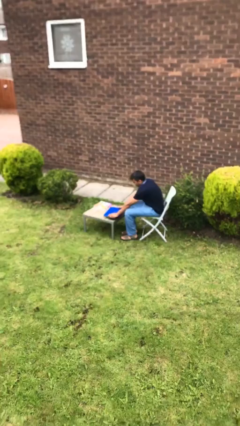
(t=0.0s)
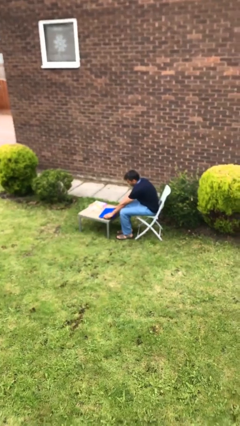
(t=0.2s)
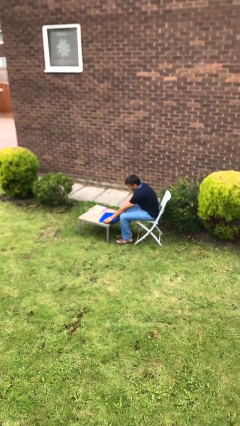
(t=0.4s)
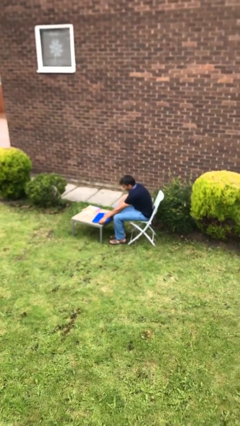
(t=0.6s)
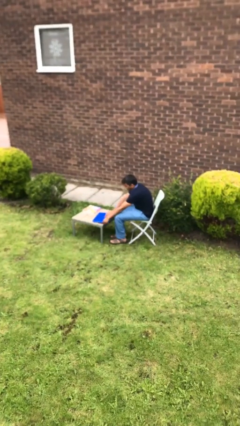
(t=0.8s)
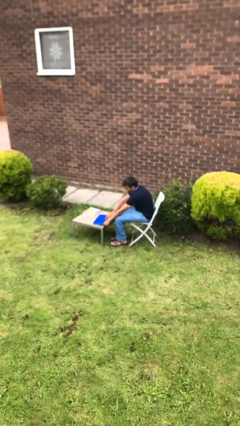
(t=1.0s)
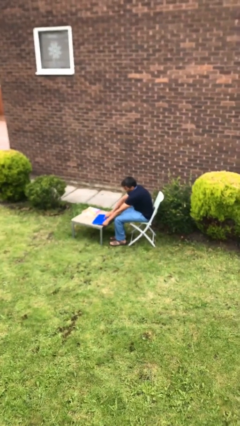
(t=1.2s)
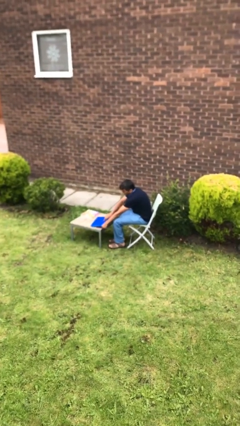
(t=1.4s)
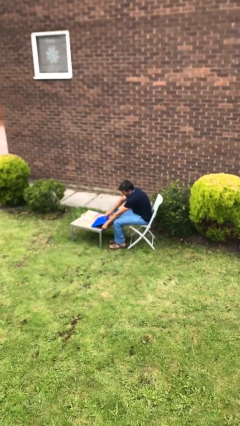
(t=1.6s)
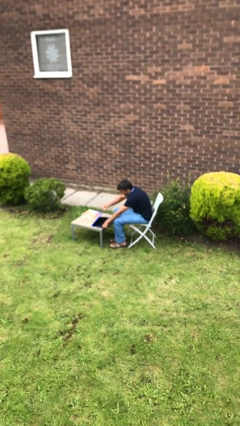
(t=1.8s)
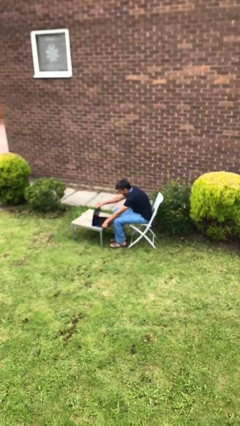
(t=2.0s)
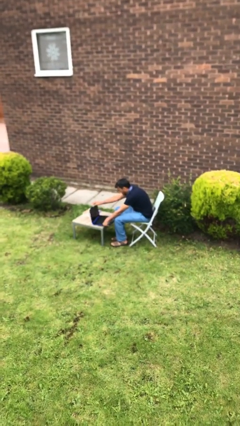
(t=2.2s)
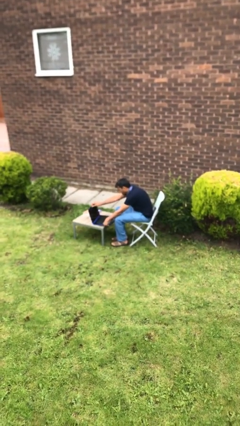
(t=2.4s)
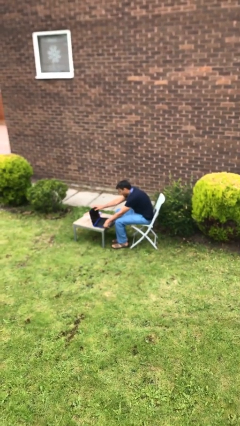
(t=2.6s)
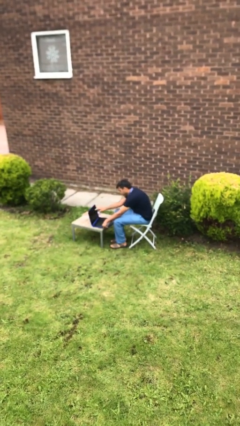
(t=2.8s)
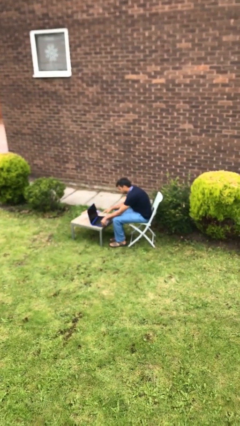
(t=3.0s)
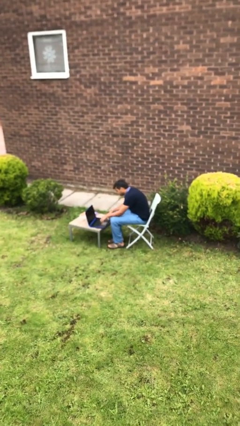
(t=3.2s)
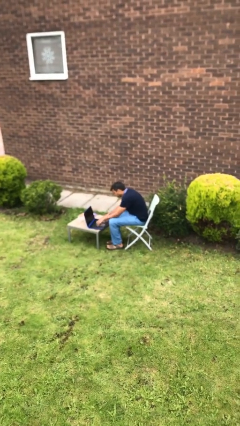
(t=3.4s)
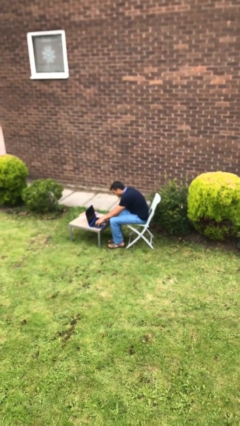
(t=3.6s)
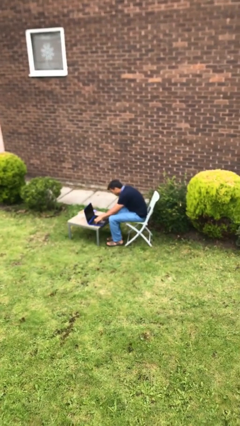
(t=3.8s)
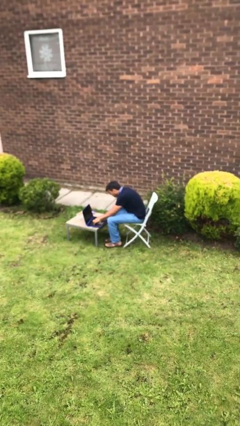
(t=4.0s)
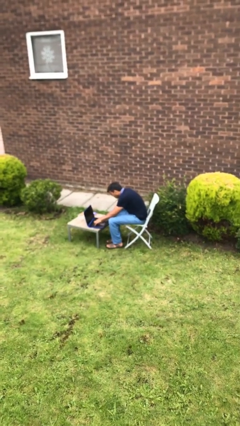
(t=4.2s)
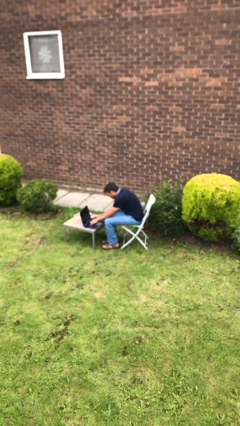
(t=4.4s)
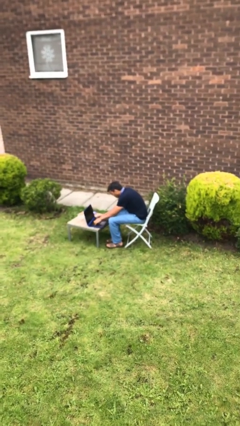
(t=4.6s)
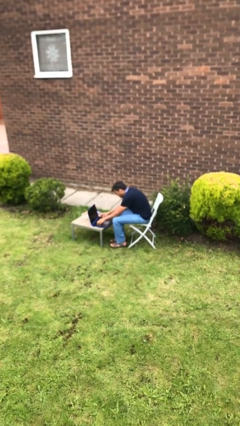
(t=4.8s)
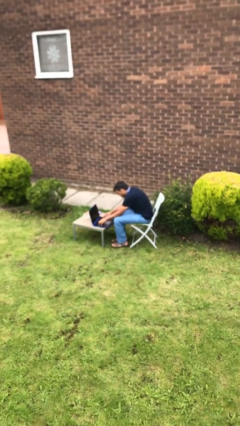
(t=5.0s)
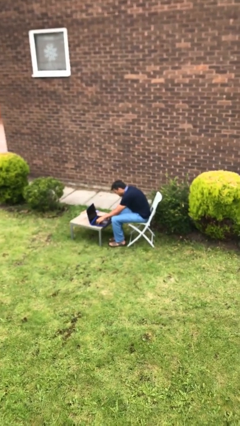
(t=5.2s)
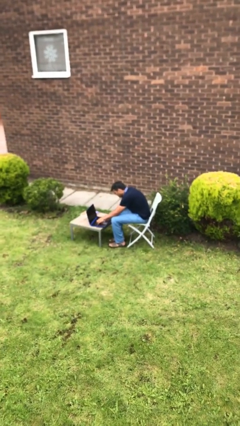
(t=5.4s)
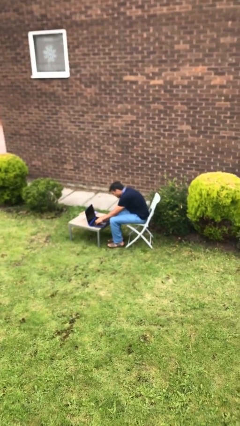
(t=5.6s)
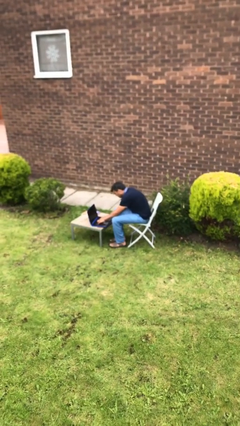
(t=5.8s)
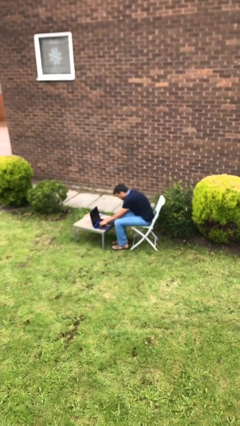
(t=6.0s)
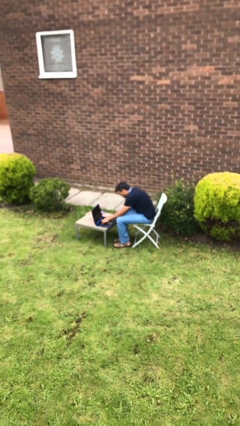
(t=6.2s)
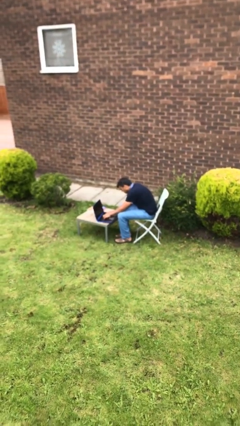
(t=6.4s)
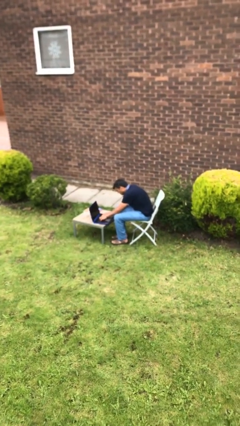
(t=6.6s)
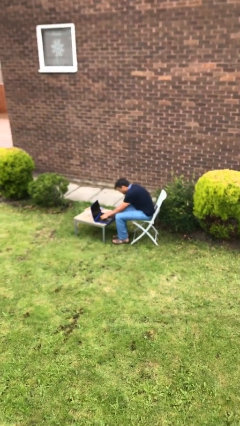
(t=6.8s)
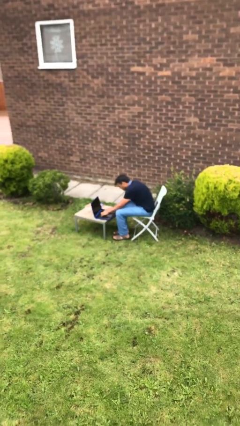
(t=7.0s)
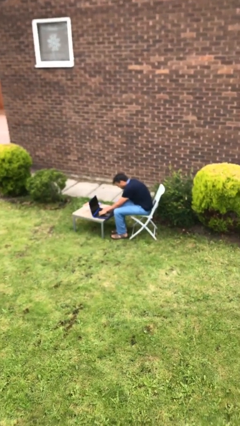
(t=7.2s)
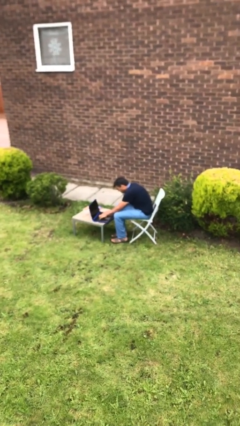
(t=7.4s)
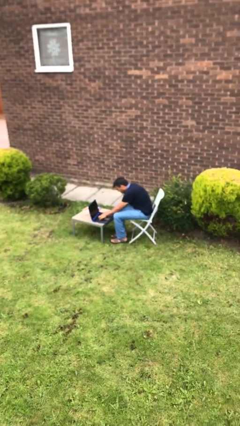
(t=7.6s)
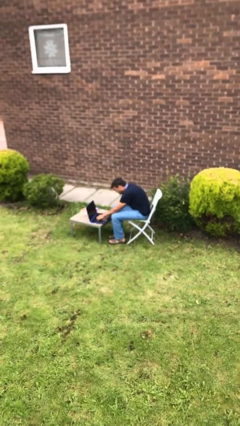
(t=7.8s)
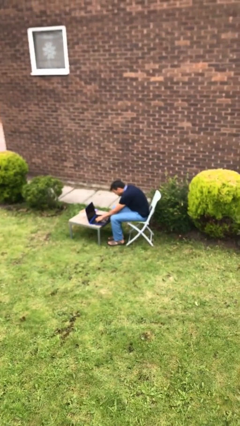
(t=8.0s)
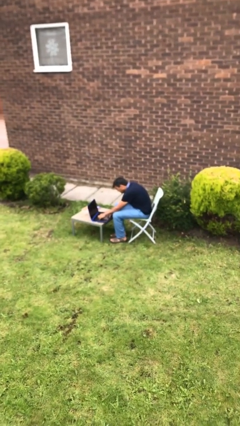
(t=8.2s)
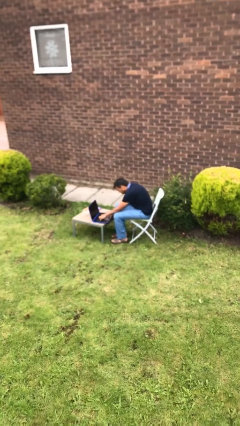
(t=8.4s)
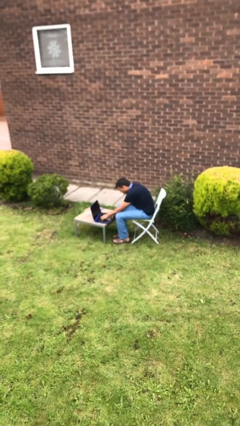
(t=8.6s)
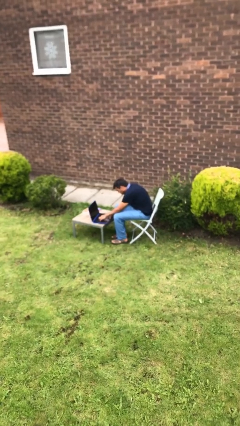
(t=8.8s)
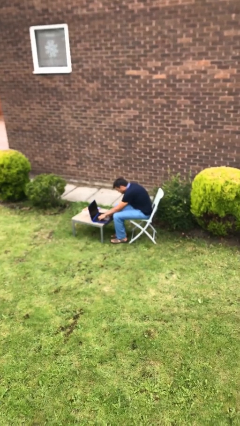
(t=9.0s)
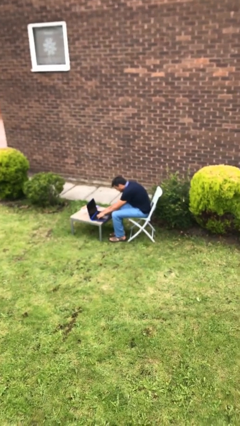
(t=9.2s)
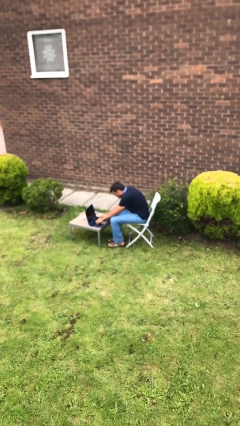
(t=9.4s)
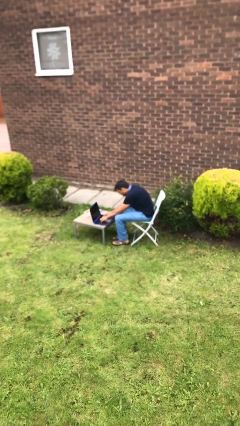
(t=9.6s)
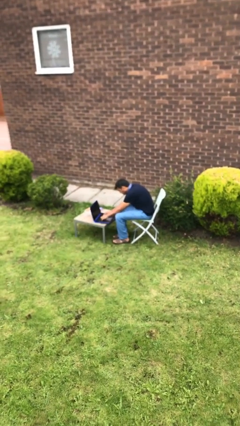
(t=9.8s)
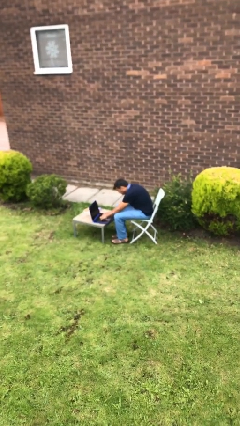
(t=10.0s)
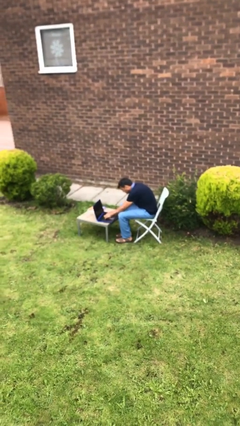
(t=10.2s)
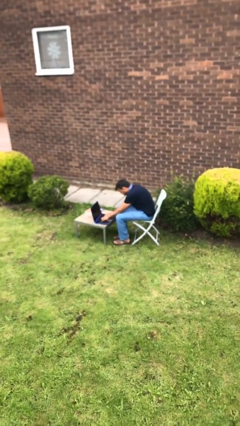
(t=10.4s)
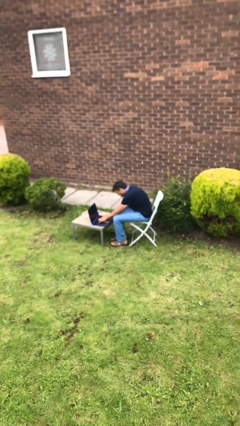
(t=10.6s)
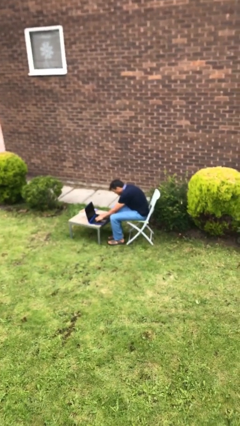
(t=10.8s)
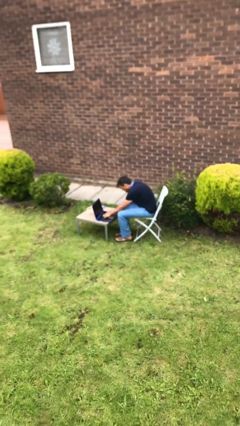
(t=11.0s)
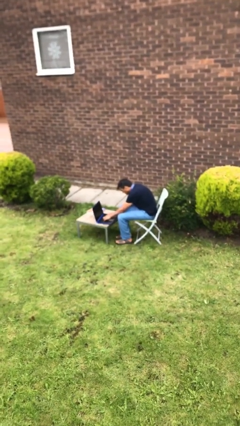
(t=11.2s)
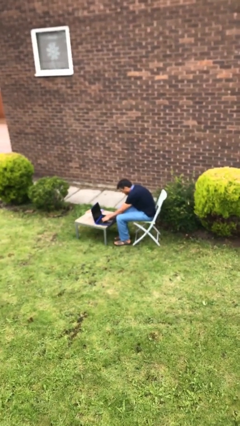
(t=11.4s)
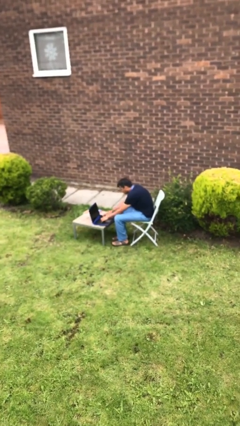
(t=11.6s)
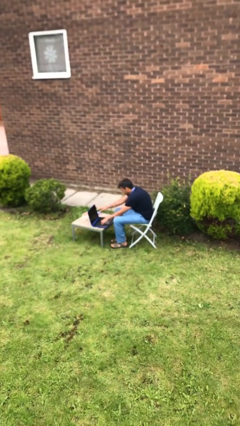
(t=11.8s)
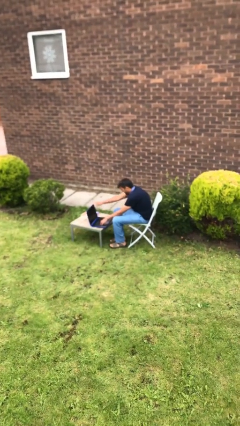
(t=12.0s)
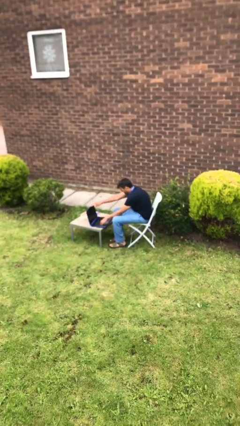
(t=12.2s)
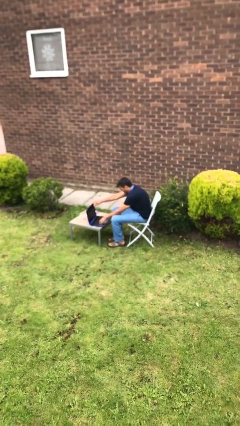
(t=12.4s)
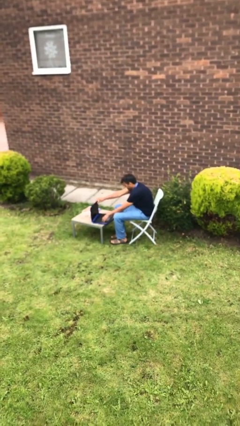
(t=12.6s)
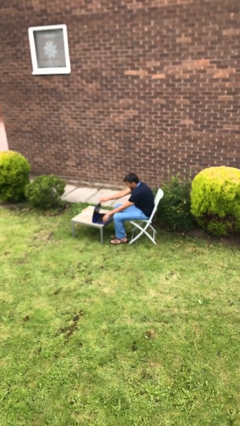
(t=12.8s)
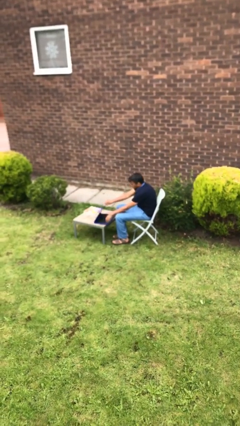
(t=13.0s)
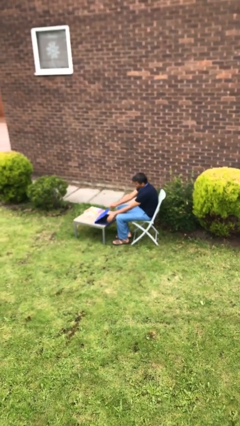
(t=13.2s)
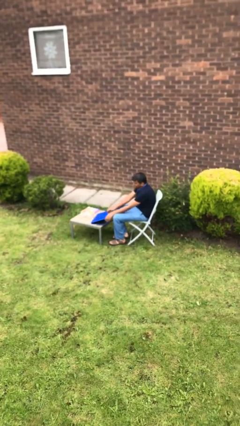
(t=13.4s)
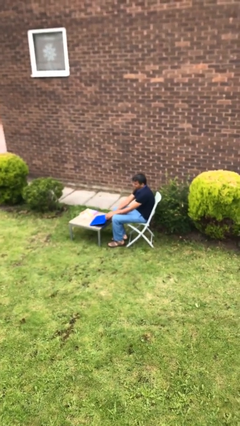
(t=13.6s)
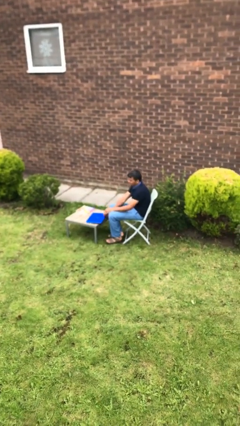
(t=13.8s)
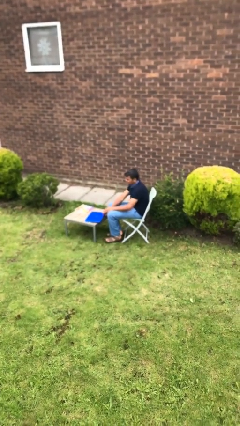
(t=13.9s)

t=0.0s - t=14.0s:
person interacts with laptop

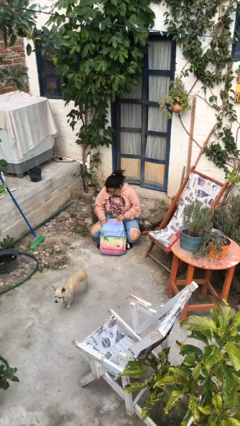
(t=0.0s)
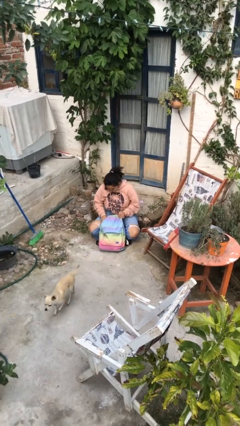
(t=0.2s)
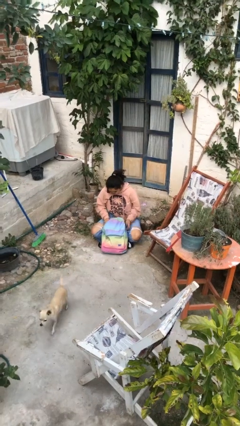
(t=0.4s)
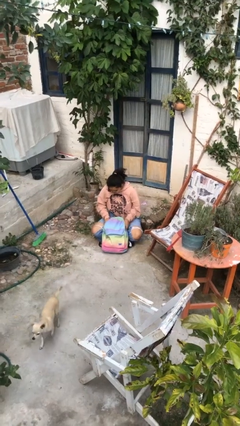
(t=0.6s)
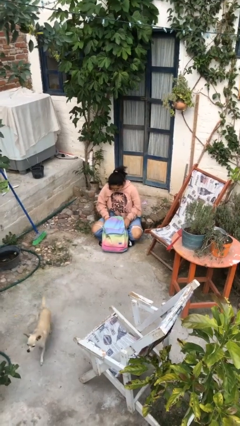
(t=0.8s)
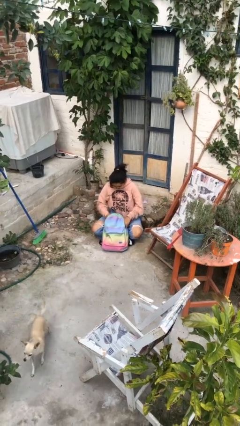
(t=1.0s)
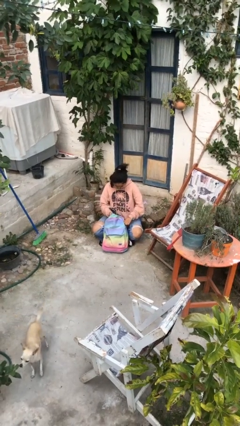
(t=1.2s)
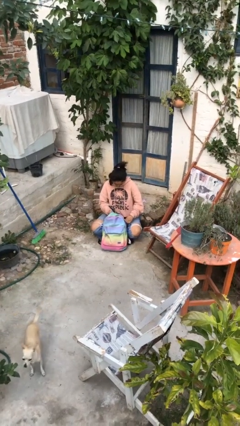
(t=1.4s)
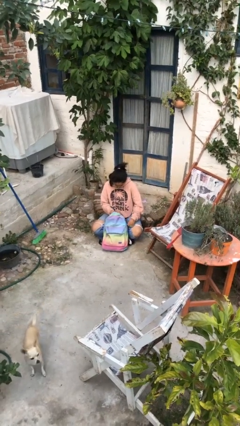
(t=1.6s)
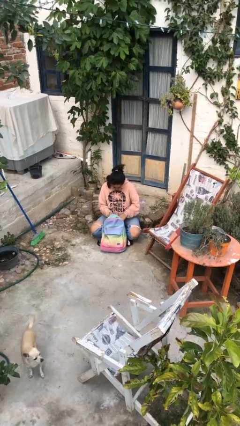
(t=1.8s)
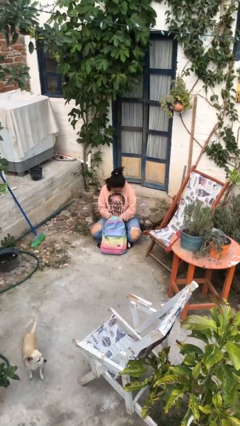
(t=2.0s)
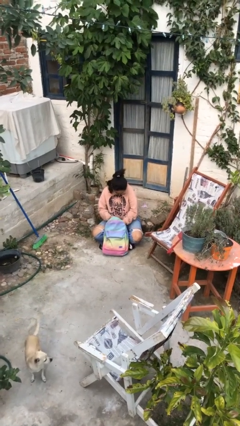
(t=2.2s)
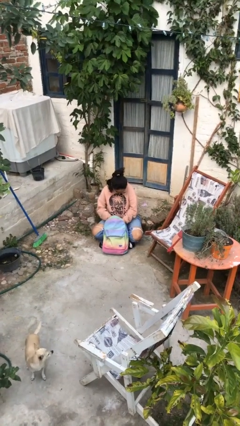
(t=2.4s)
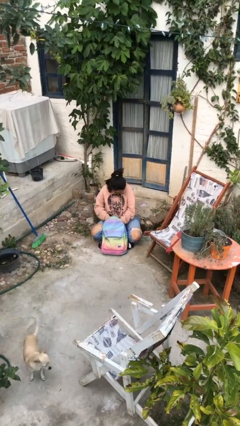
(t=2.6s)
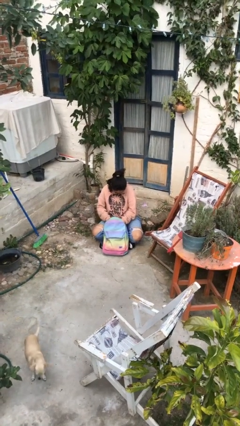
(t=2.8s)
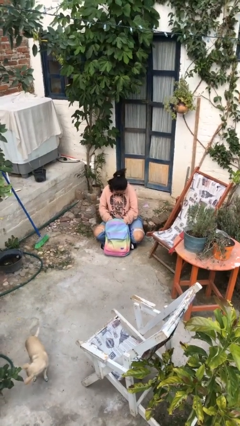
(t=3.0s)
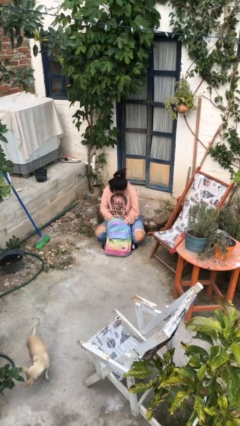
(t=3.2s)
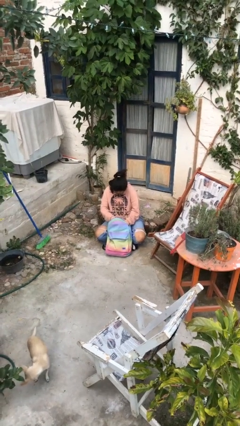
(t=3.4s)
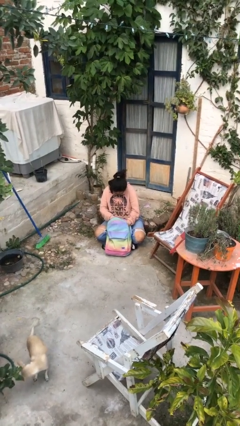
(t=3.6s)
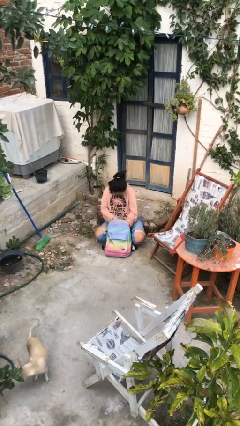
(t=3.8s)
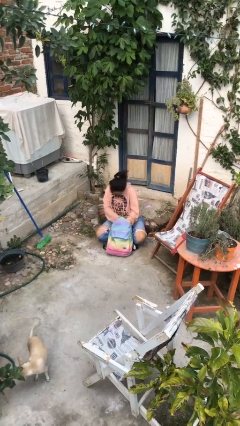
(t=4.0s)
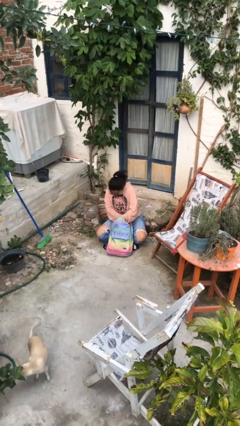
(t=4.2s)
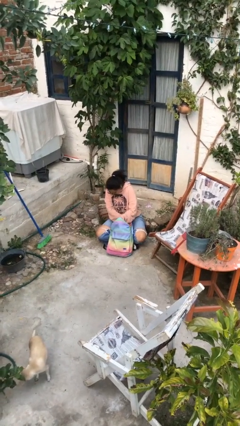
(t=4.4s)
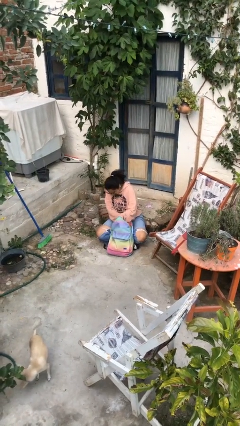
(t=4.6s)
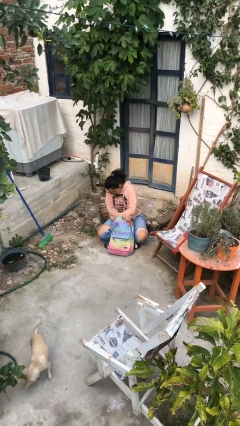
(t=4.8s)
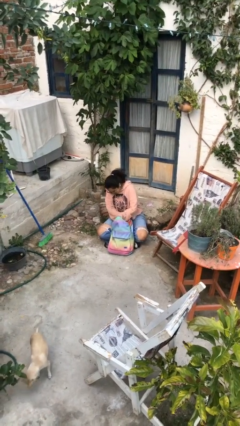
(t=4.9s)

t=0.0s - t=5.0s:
person searches in backpack
